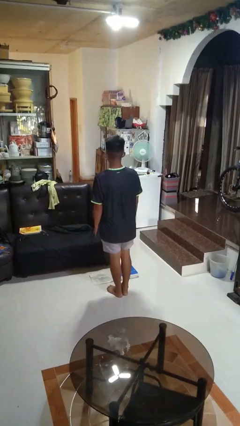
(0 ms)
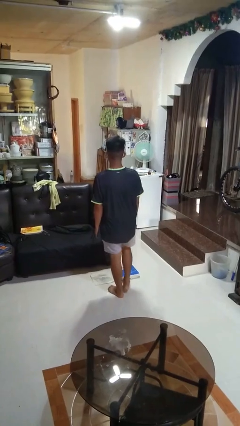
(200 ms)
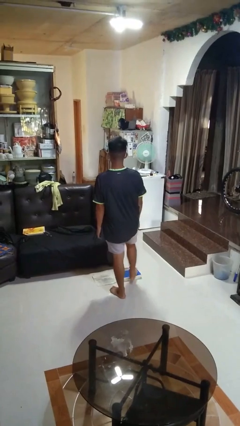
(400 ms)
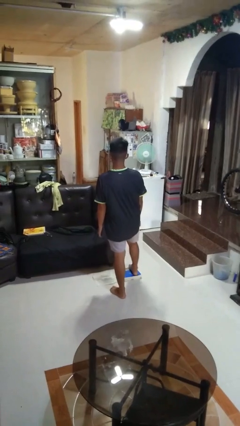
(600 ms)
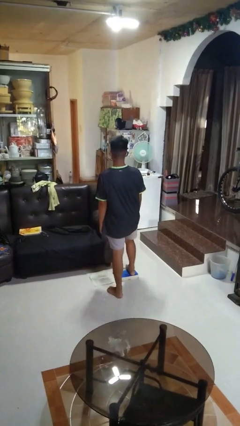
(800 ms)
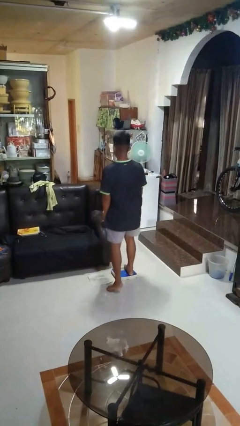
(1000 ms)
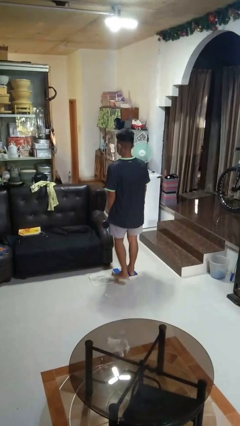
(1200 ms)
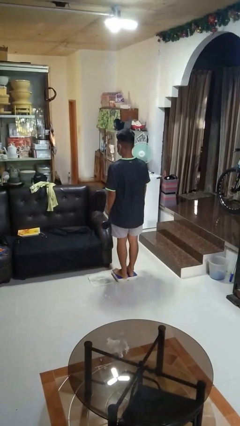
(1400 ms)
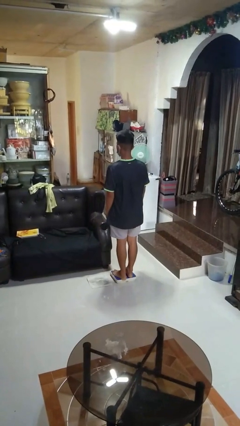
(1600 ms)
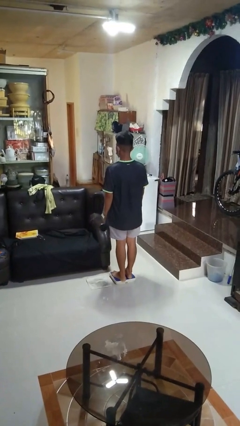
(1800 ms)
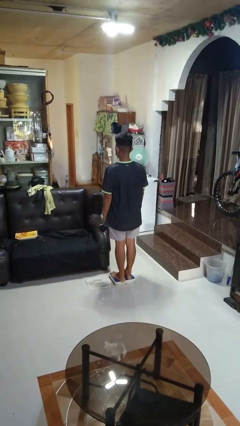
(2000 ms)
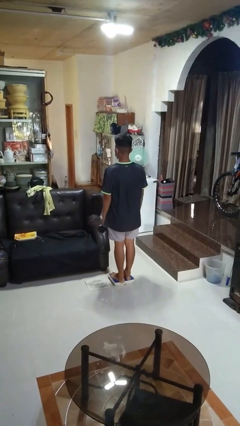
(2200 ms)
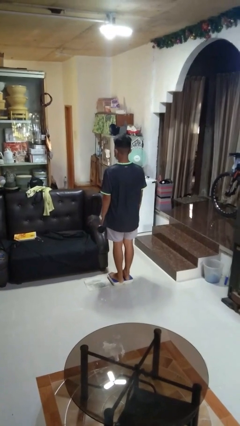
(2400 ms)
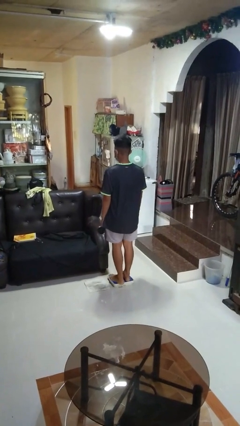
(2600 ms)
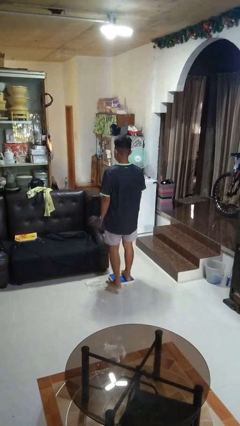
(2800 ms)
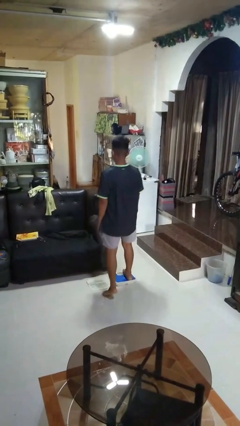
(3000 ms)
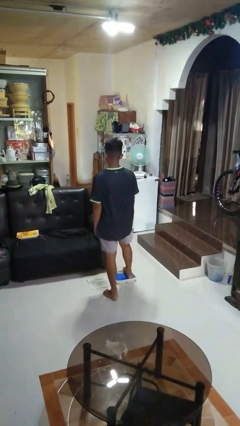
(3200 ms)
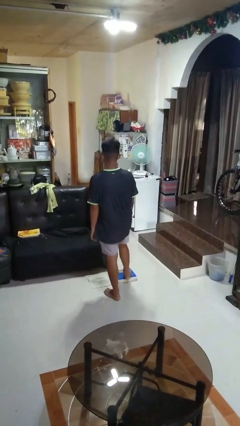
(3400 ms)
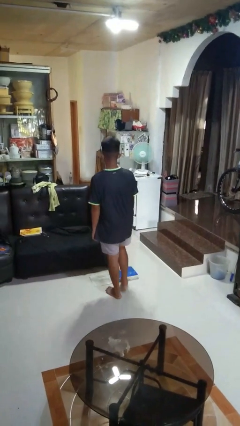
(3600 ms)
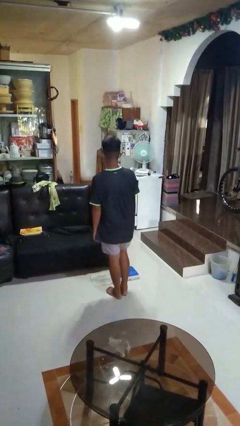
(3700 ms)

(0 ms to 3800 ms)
person uses bodyweight scale

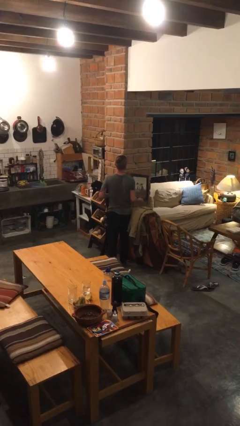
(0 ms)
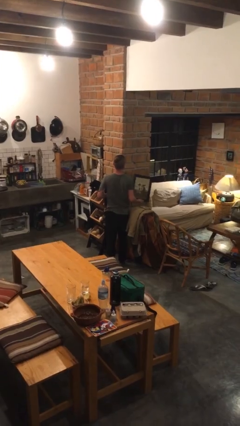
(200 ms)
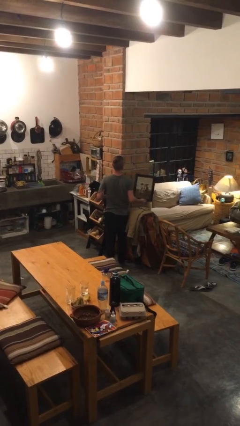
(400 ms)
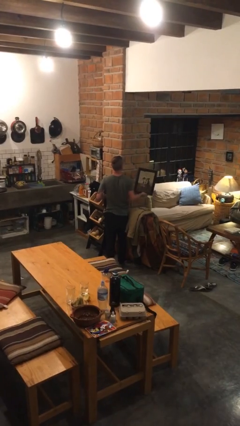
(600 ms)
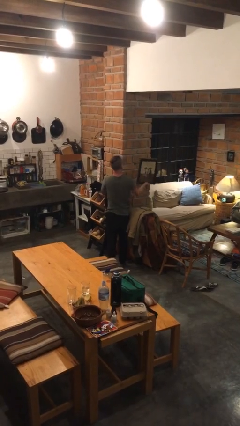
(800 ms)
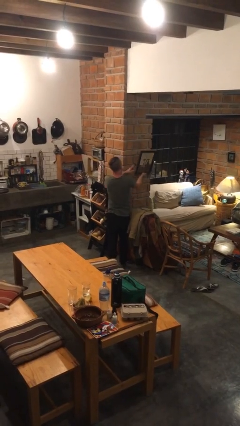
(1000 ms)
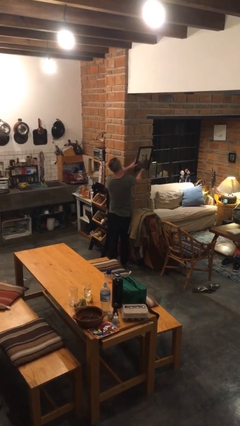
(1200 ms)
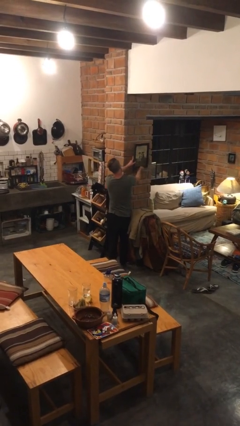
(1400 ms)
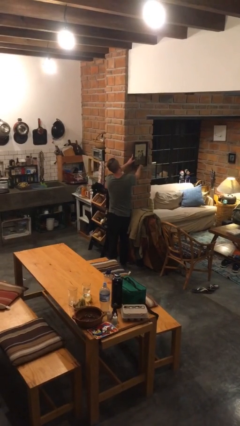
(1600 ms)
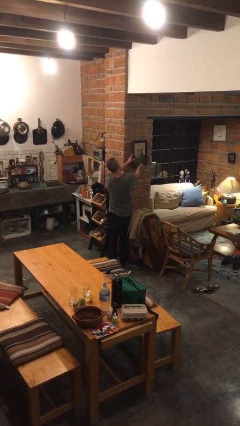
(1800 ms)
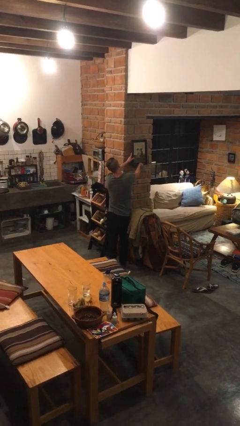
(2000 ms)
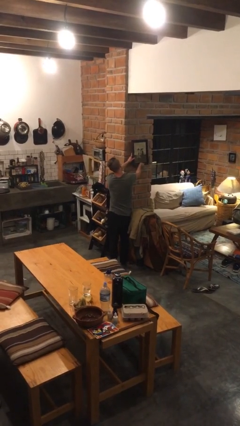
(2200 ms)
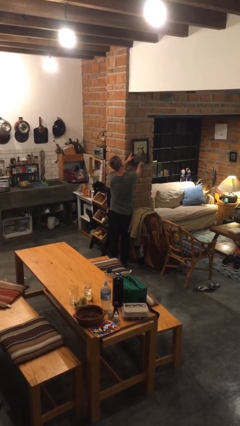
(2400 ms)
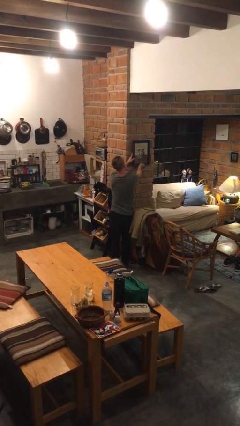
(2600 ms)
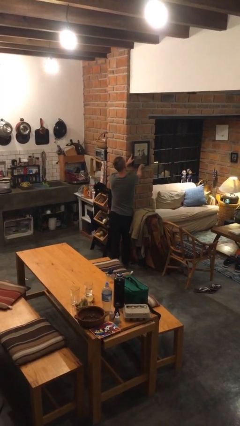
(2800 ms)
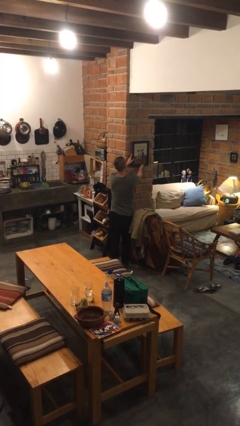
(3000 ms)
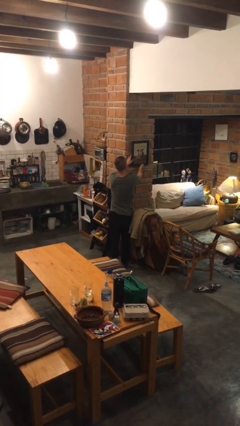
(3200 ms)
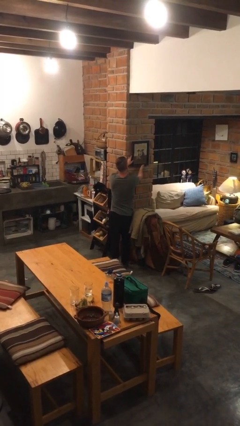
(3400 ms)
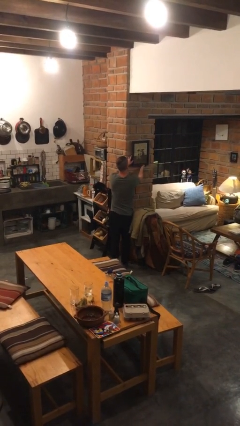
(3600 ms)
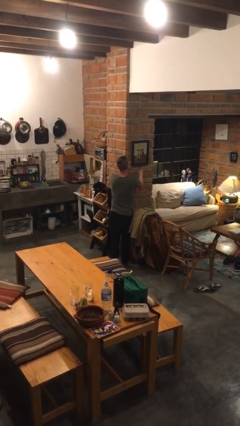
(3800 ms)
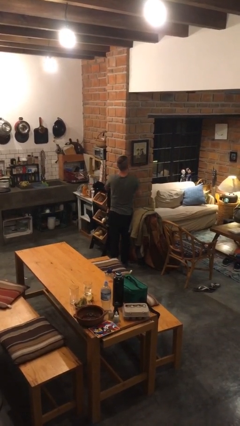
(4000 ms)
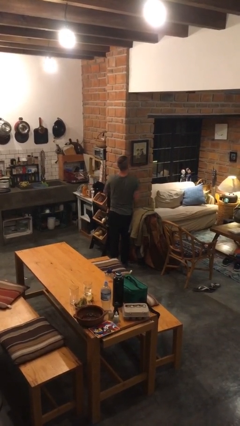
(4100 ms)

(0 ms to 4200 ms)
person puts up picture frame

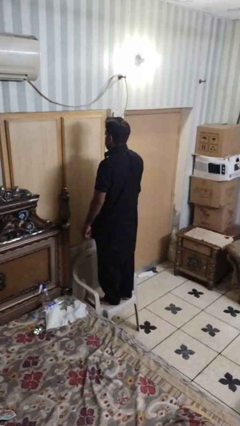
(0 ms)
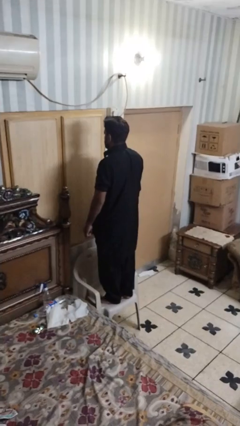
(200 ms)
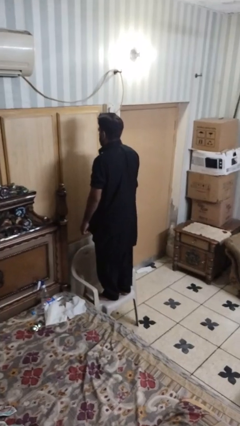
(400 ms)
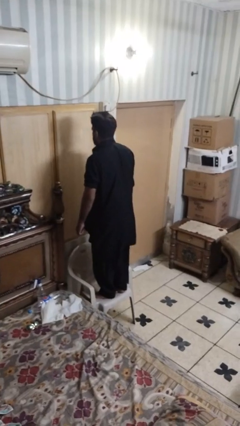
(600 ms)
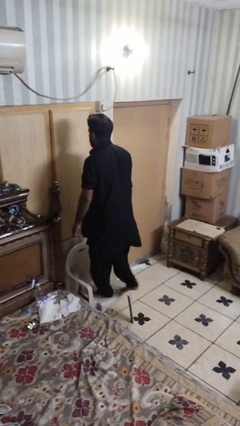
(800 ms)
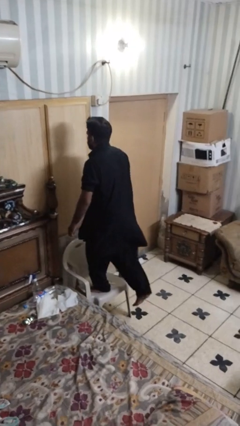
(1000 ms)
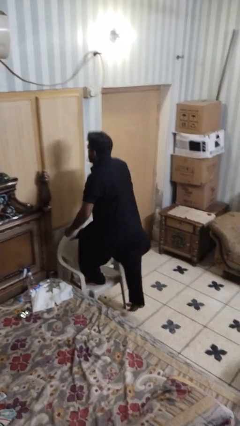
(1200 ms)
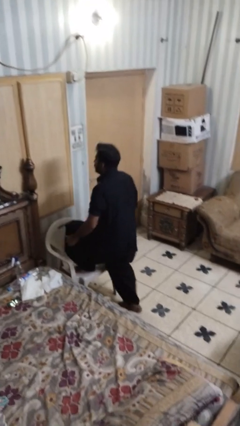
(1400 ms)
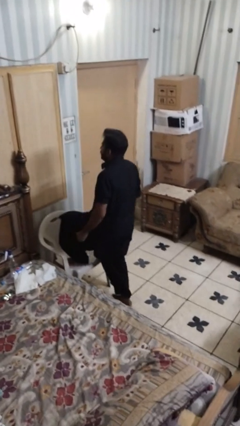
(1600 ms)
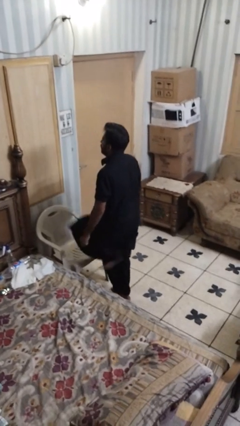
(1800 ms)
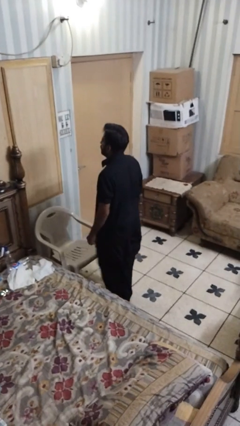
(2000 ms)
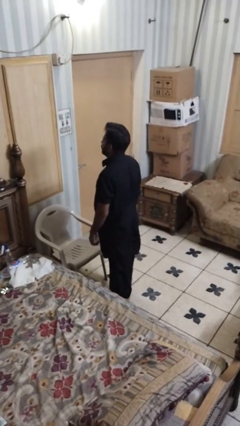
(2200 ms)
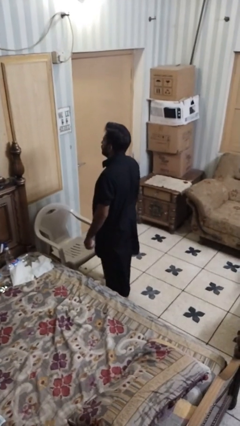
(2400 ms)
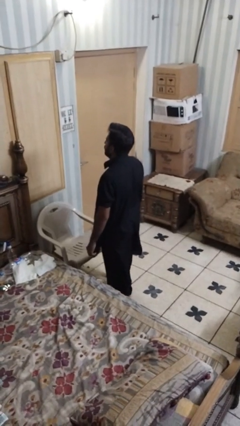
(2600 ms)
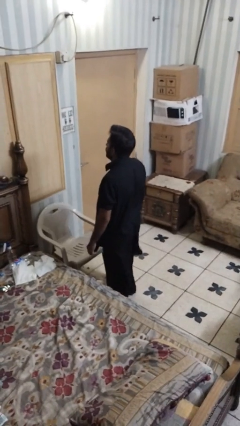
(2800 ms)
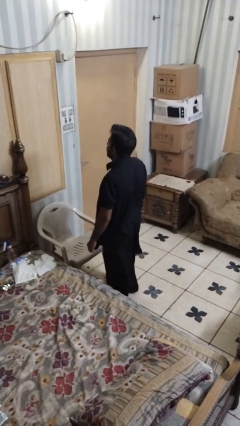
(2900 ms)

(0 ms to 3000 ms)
person climbs off chair

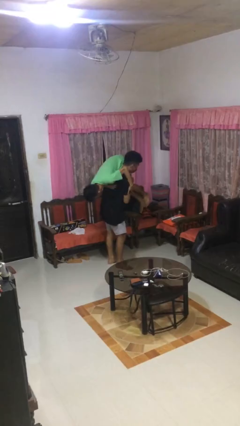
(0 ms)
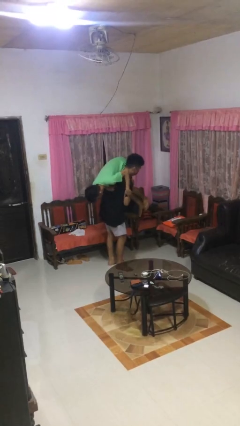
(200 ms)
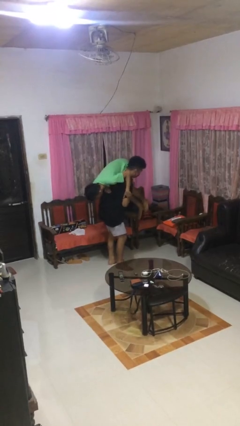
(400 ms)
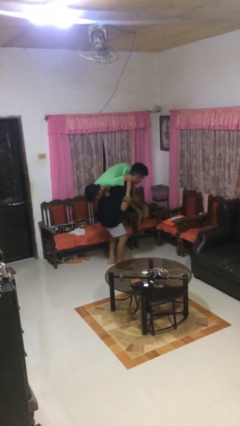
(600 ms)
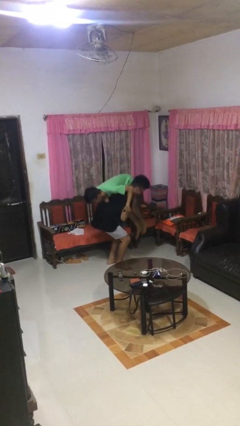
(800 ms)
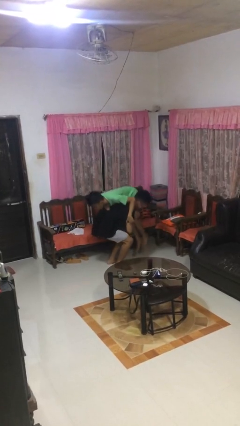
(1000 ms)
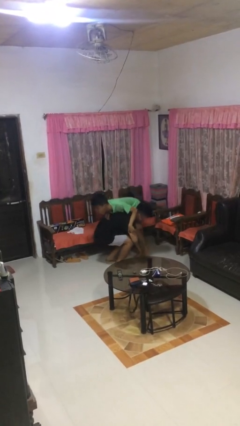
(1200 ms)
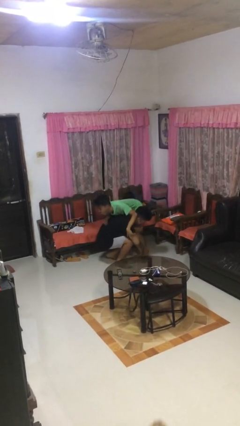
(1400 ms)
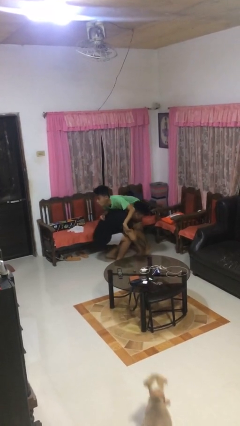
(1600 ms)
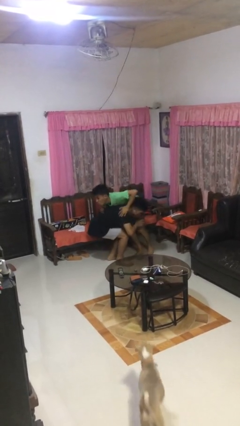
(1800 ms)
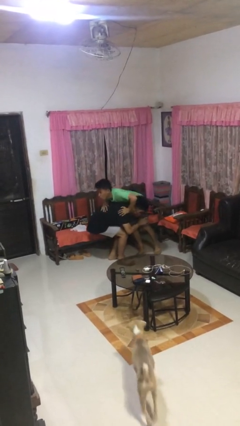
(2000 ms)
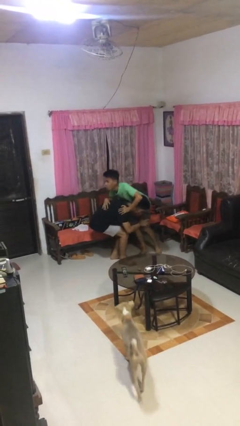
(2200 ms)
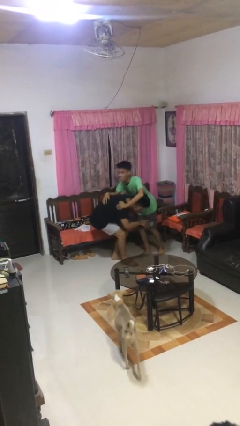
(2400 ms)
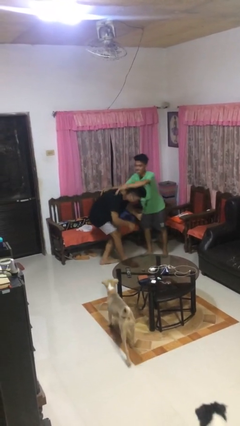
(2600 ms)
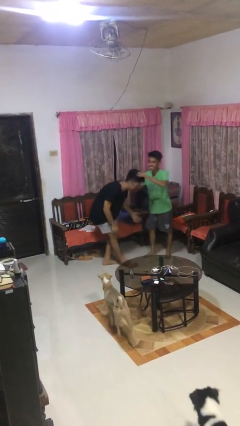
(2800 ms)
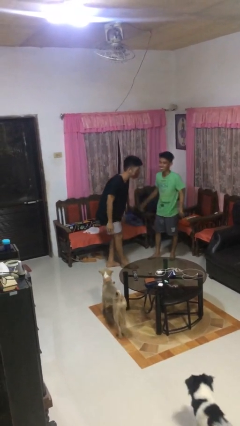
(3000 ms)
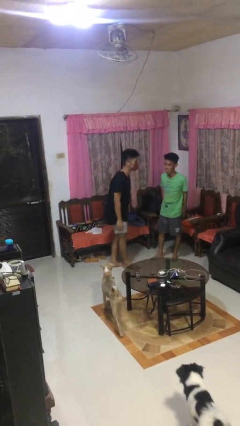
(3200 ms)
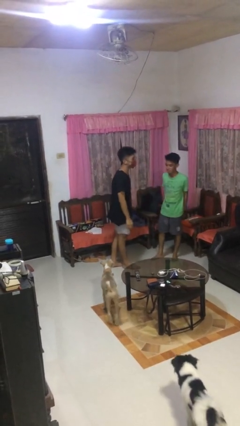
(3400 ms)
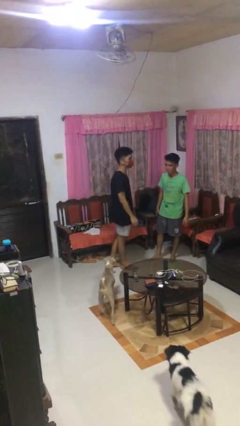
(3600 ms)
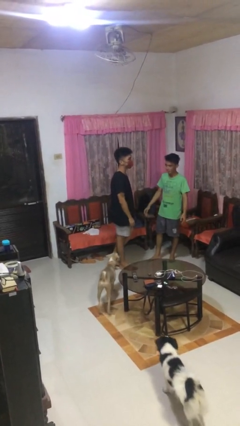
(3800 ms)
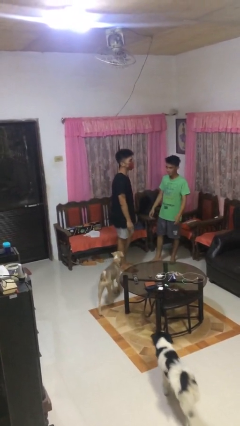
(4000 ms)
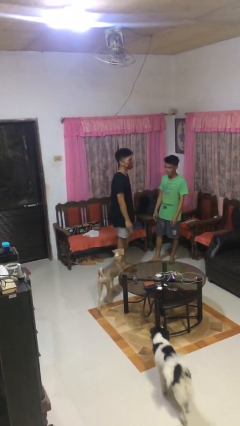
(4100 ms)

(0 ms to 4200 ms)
person puts down person

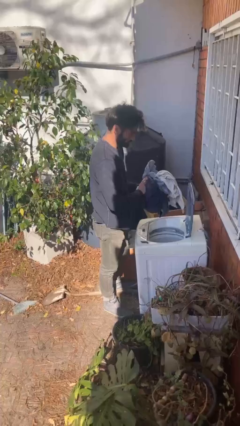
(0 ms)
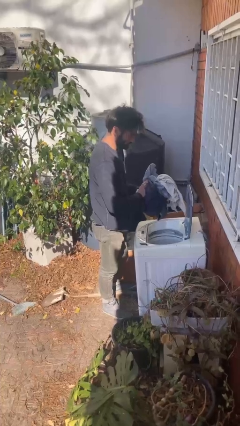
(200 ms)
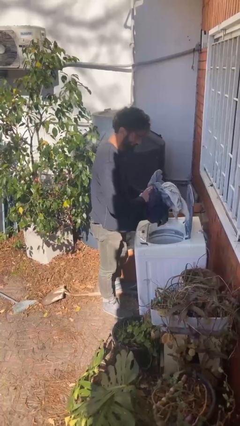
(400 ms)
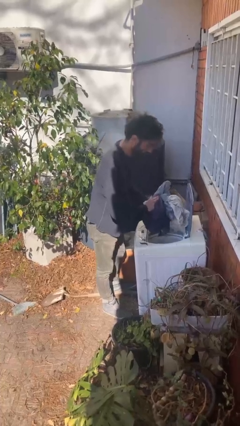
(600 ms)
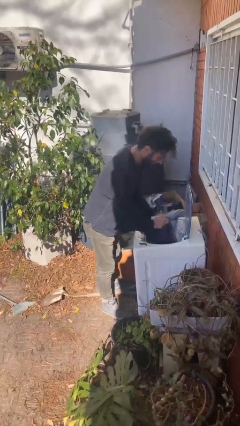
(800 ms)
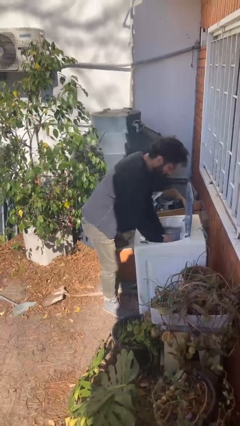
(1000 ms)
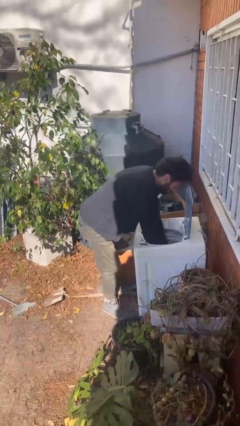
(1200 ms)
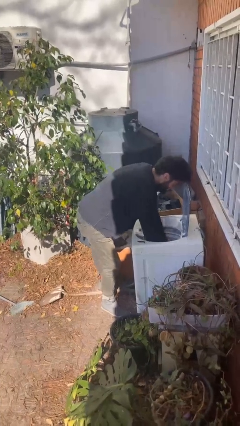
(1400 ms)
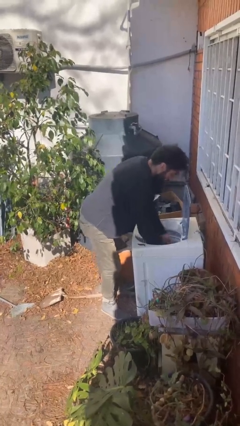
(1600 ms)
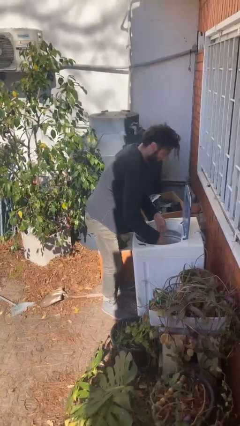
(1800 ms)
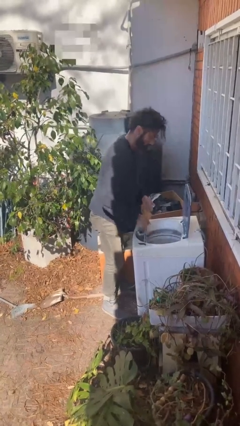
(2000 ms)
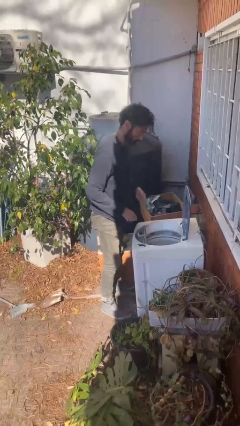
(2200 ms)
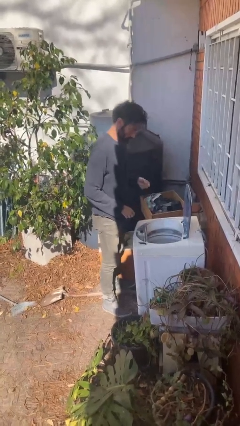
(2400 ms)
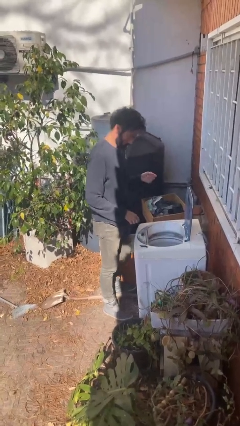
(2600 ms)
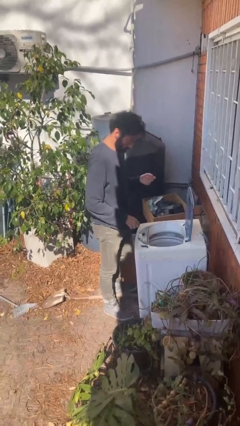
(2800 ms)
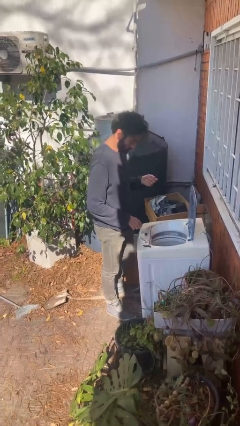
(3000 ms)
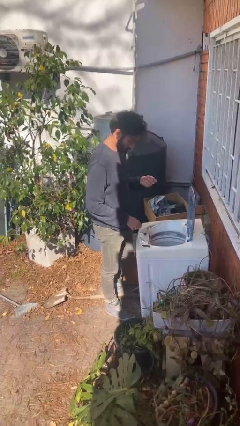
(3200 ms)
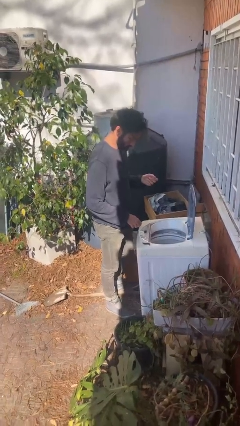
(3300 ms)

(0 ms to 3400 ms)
person loads clotheswasher
